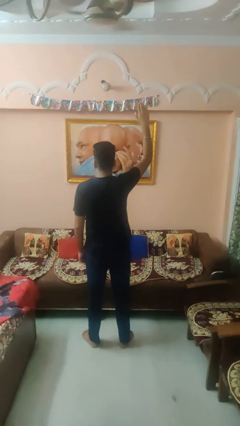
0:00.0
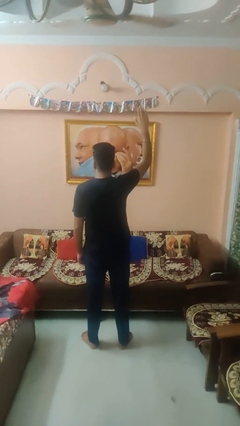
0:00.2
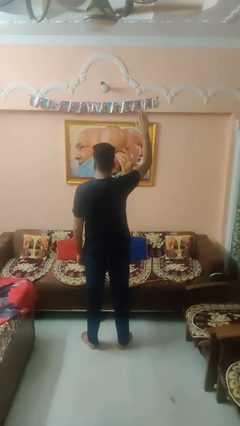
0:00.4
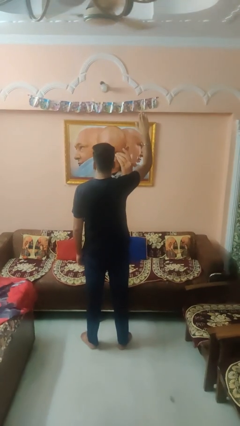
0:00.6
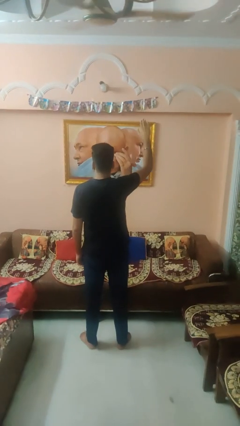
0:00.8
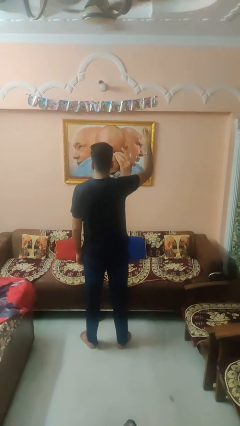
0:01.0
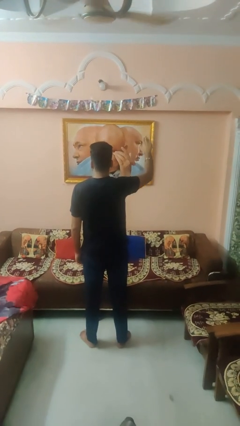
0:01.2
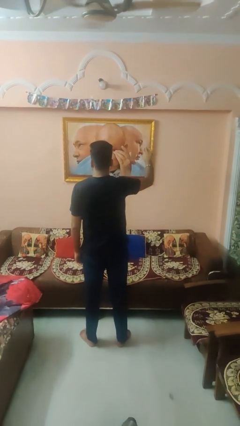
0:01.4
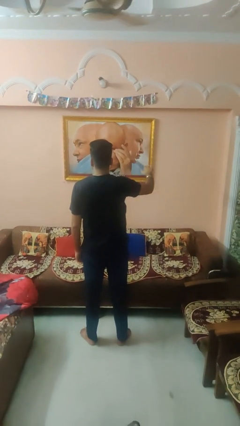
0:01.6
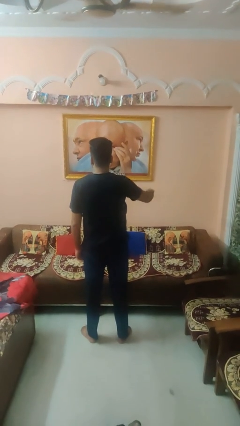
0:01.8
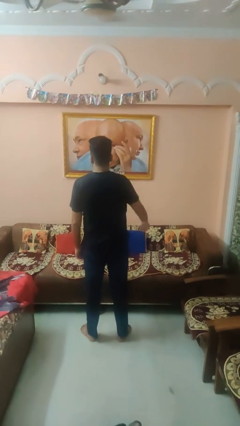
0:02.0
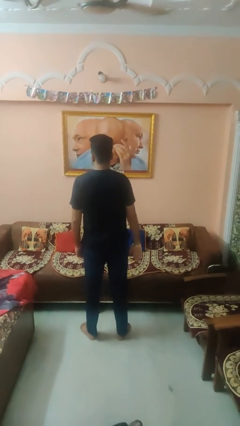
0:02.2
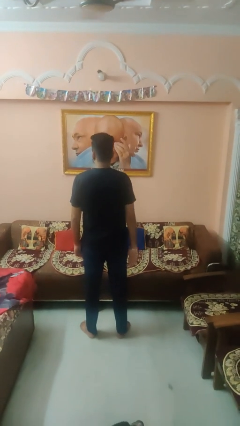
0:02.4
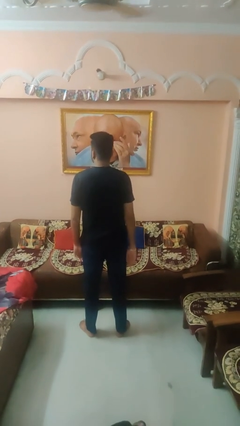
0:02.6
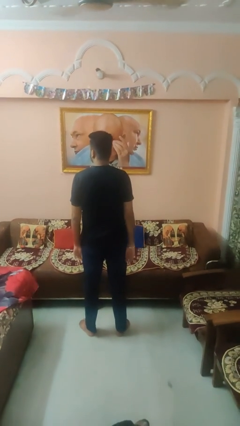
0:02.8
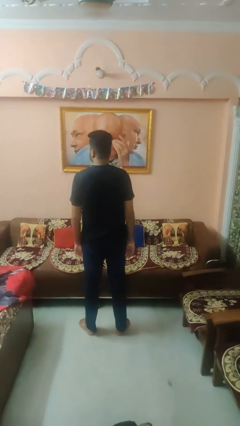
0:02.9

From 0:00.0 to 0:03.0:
person gestures lower hand

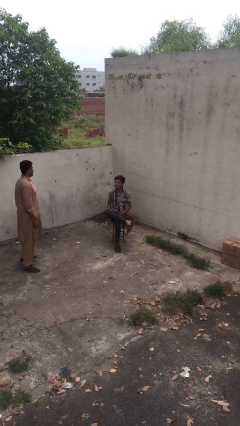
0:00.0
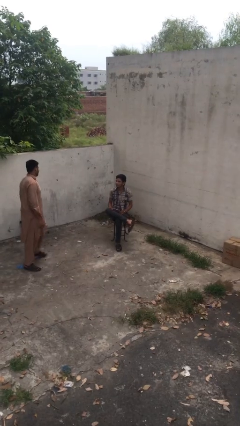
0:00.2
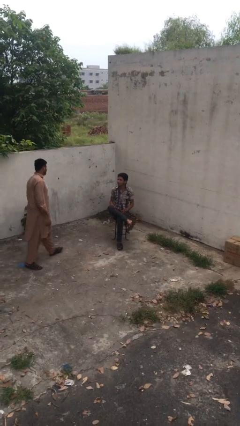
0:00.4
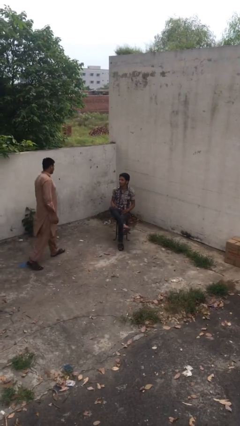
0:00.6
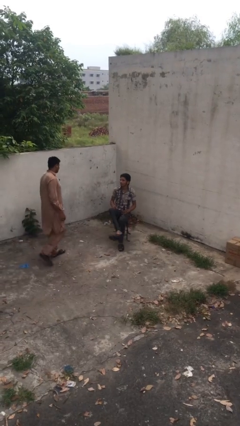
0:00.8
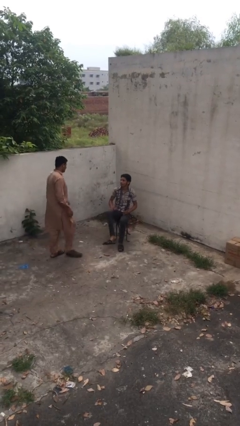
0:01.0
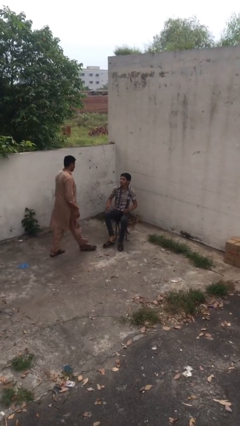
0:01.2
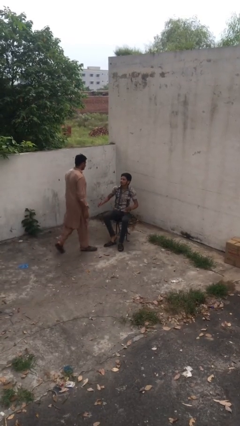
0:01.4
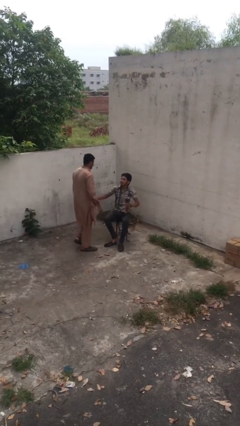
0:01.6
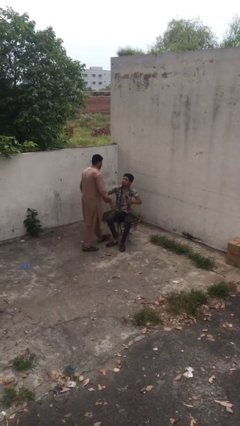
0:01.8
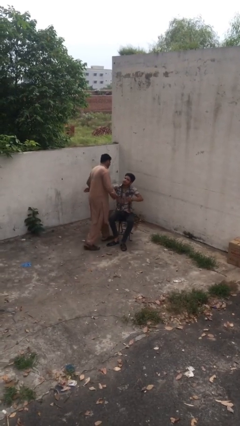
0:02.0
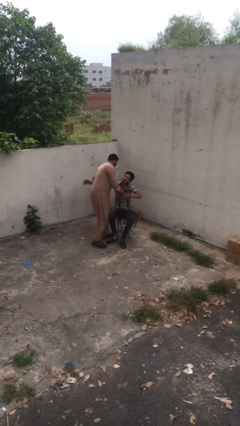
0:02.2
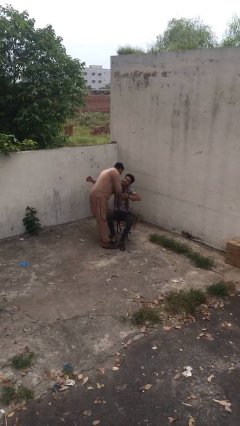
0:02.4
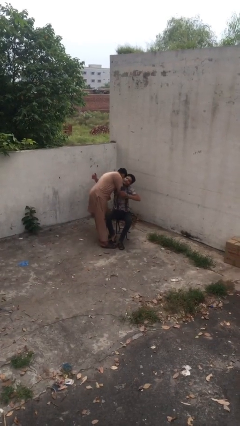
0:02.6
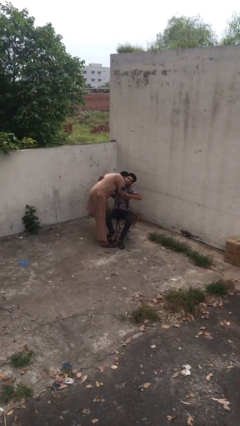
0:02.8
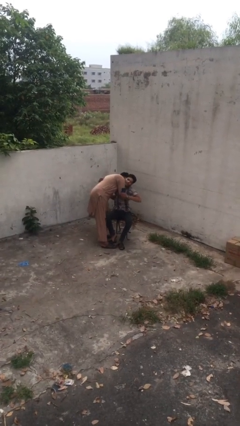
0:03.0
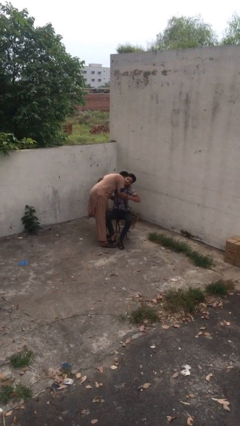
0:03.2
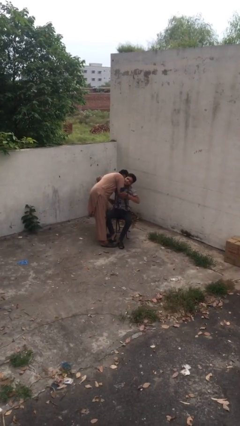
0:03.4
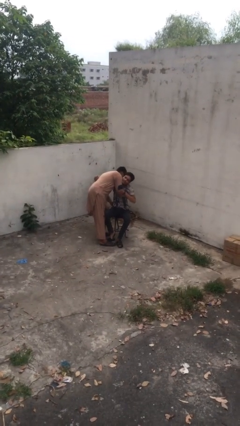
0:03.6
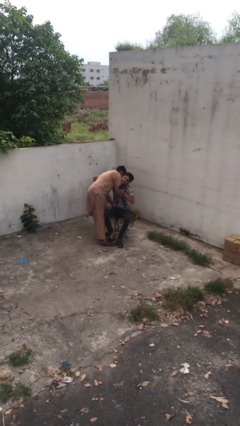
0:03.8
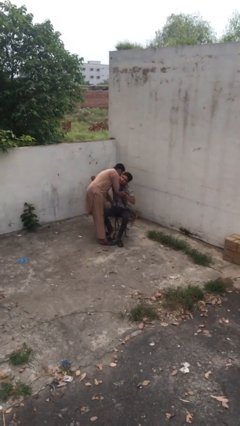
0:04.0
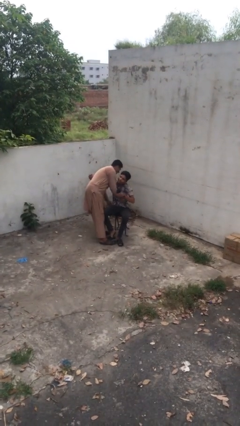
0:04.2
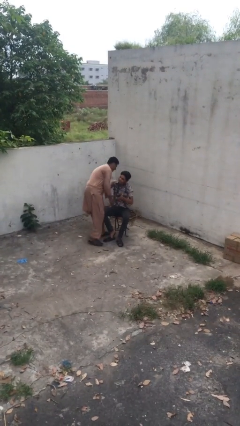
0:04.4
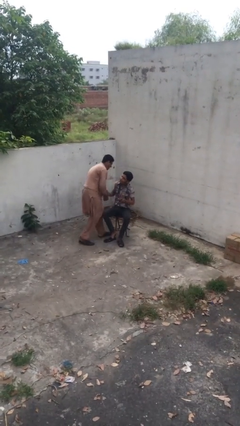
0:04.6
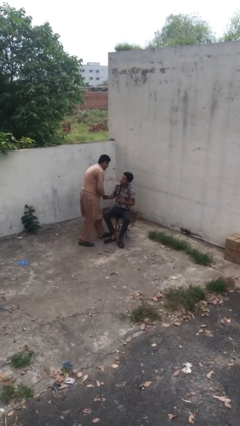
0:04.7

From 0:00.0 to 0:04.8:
person embraces person

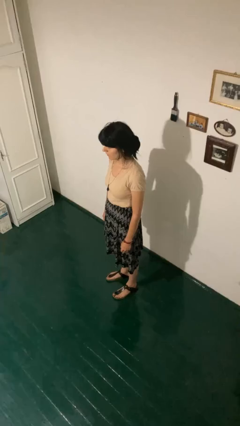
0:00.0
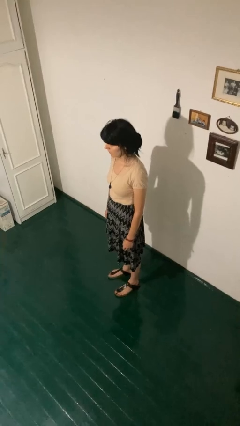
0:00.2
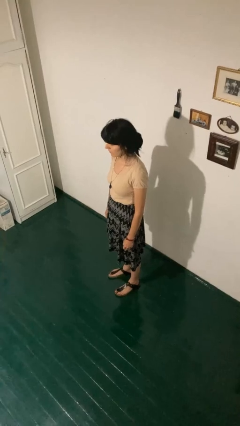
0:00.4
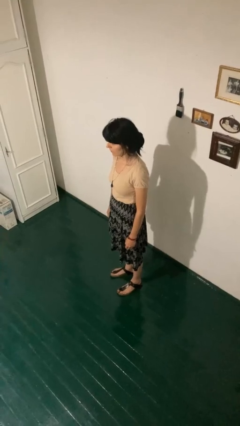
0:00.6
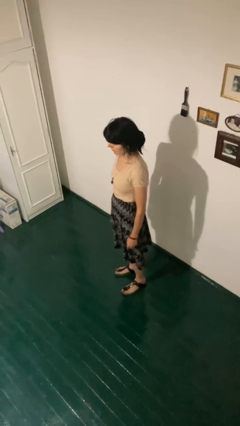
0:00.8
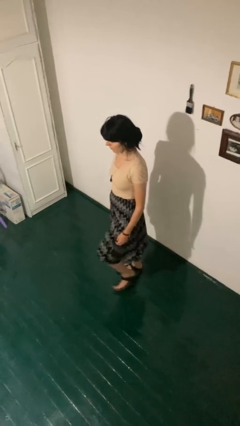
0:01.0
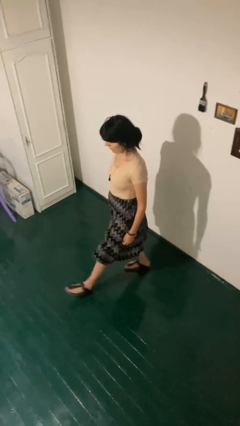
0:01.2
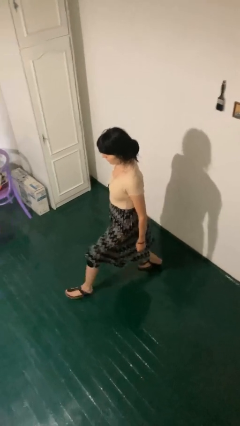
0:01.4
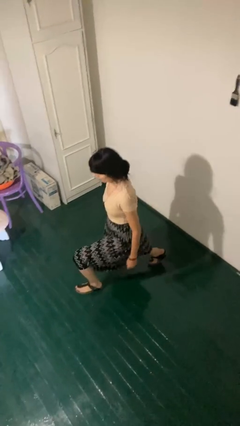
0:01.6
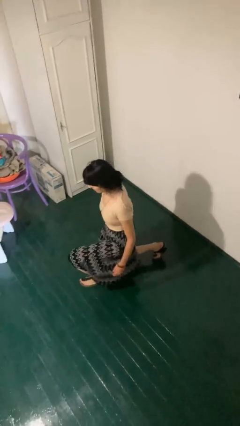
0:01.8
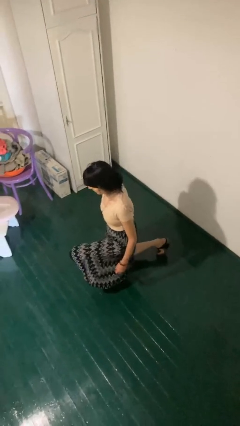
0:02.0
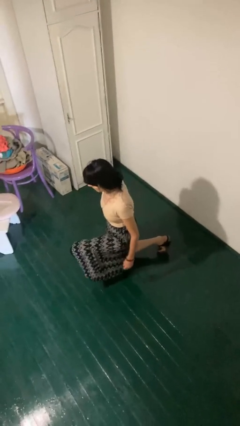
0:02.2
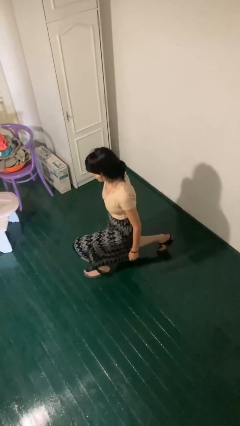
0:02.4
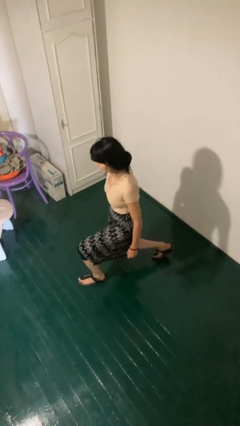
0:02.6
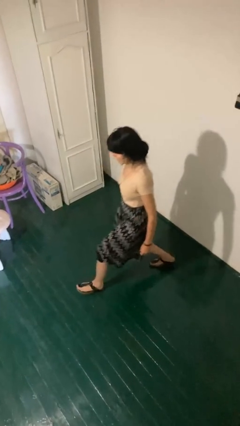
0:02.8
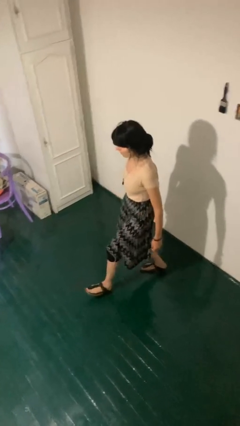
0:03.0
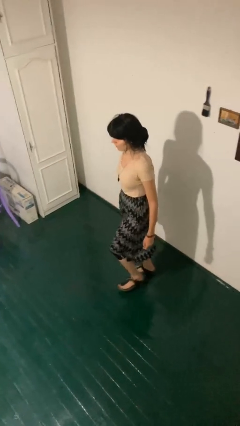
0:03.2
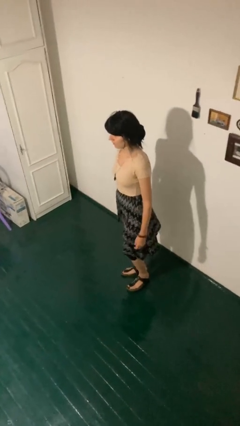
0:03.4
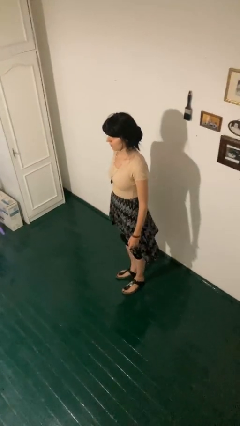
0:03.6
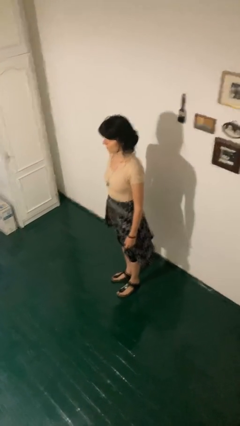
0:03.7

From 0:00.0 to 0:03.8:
person exercises with lunges

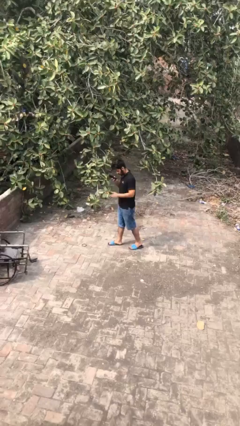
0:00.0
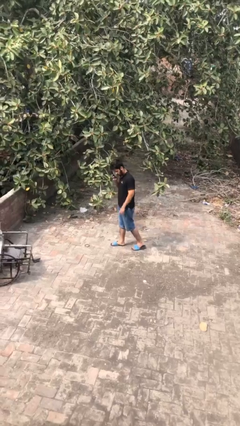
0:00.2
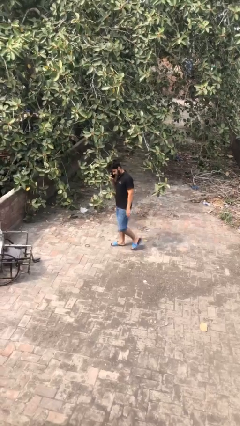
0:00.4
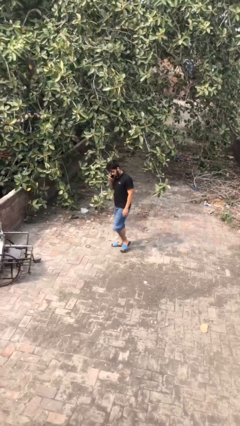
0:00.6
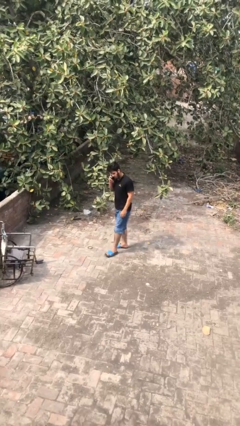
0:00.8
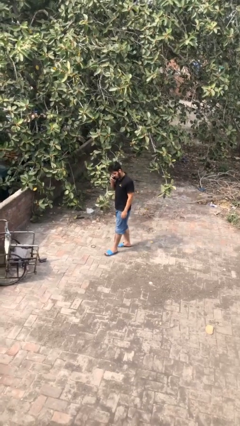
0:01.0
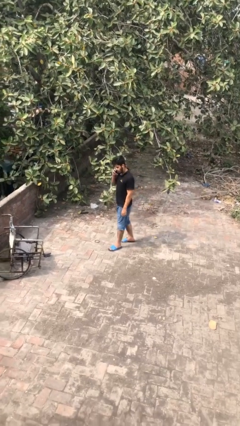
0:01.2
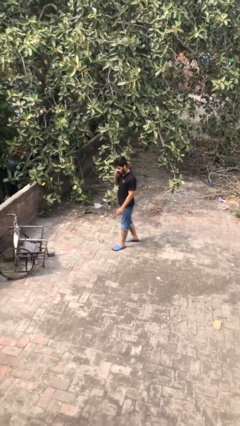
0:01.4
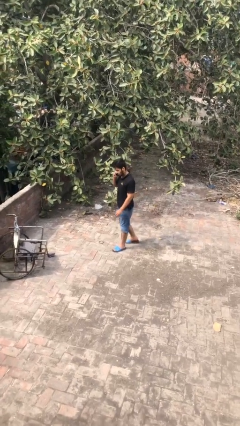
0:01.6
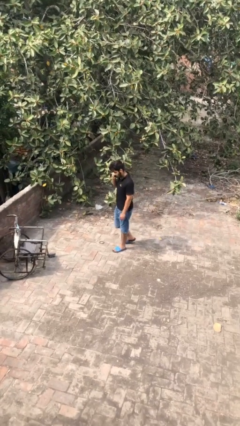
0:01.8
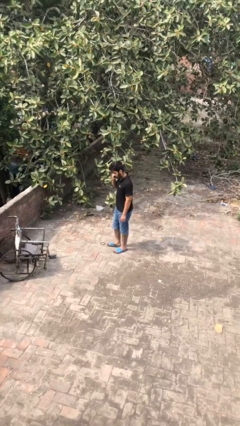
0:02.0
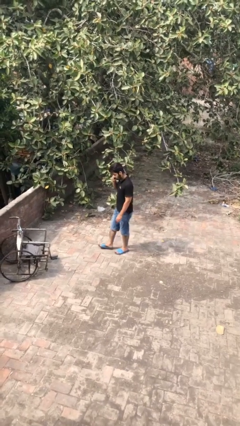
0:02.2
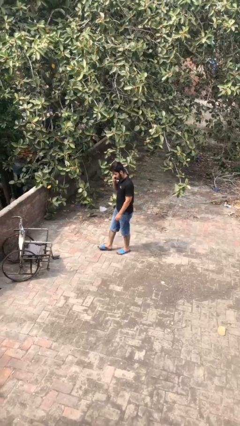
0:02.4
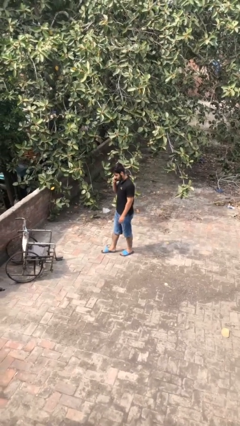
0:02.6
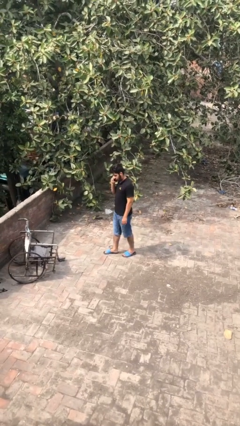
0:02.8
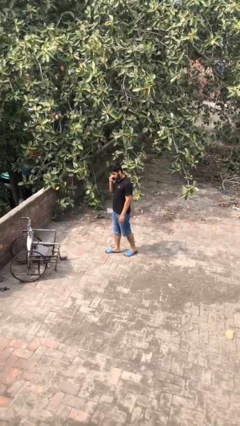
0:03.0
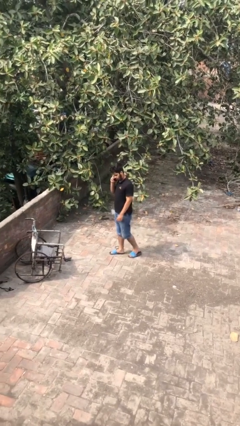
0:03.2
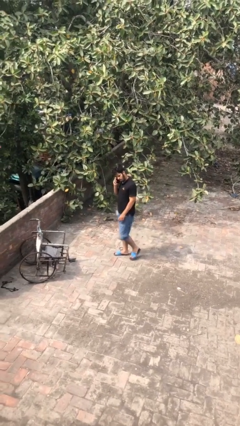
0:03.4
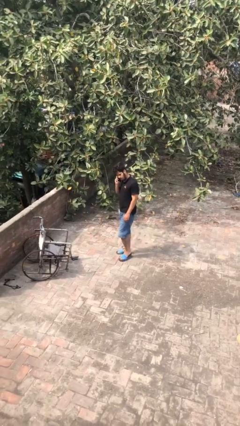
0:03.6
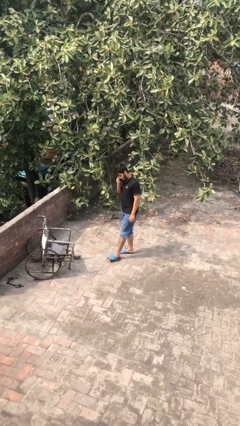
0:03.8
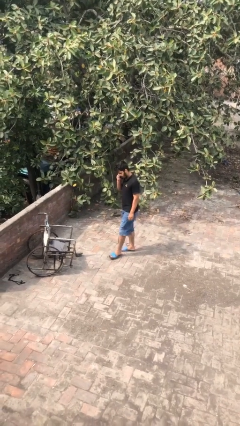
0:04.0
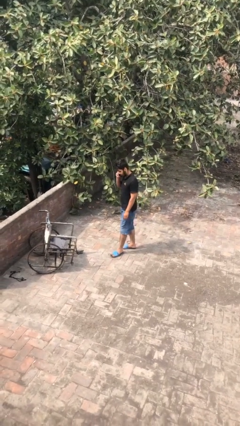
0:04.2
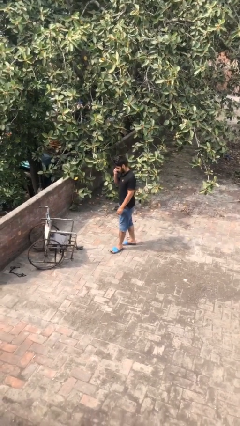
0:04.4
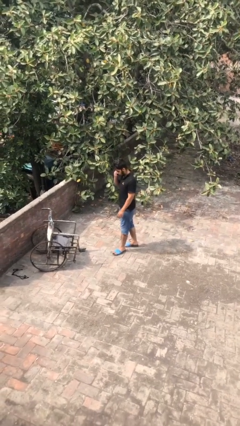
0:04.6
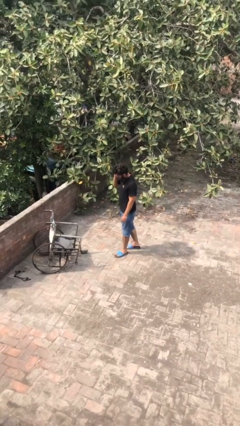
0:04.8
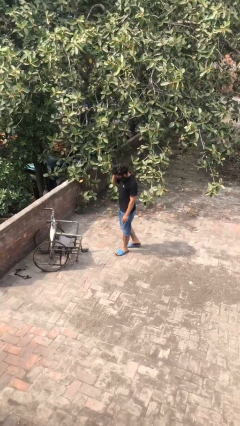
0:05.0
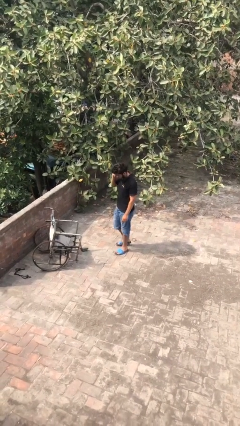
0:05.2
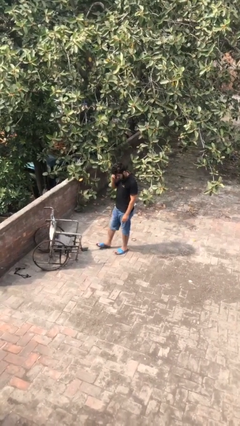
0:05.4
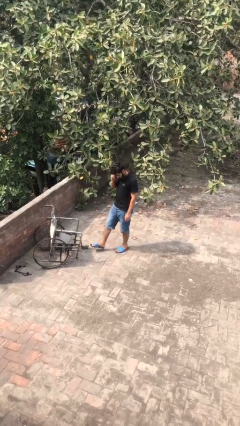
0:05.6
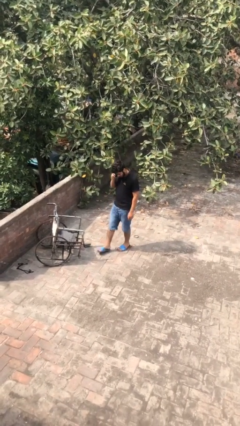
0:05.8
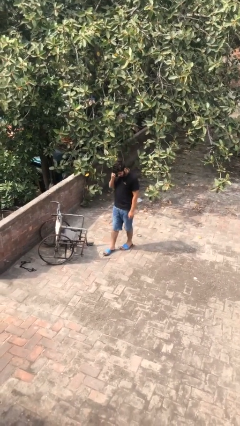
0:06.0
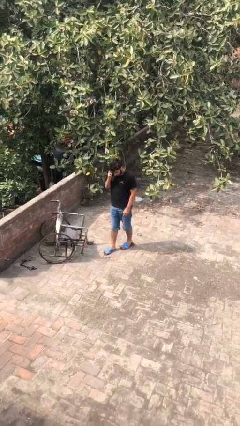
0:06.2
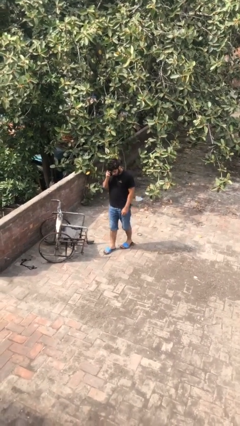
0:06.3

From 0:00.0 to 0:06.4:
person talks on phone
